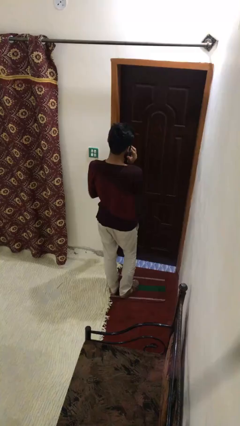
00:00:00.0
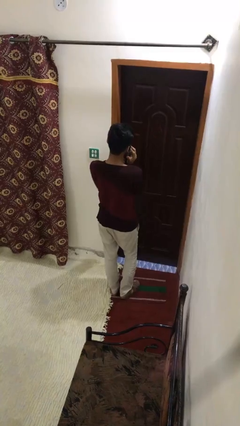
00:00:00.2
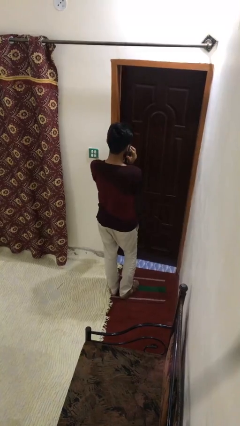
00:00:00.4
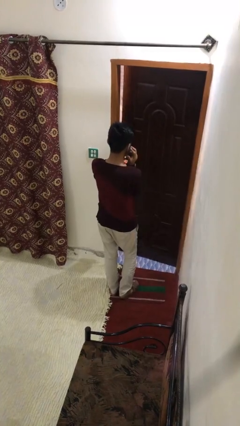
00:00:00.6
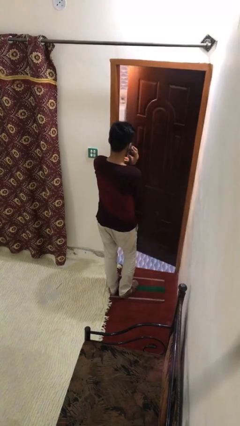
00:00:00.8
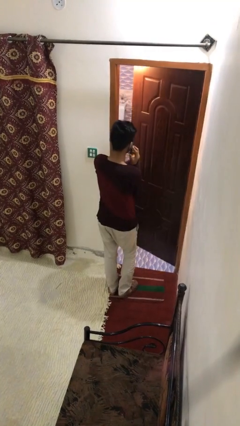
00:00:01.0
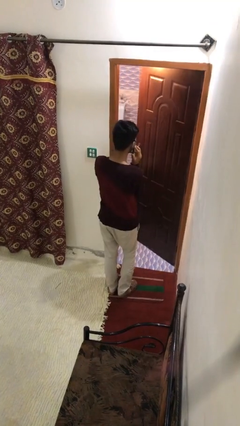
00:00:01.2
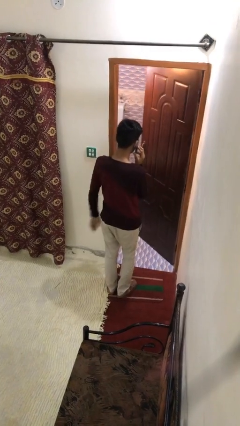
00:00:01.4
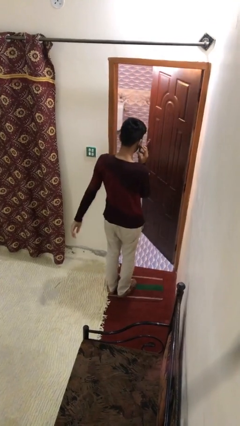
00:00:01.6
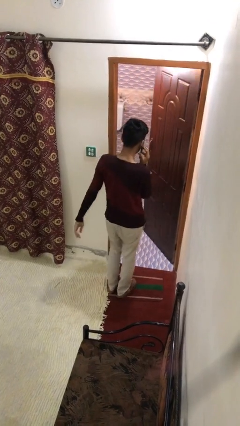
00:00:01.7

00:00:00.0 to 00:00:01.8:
person opens facility door

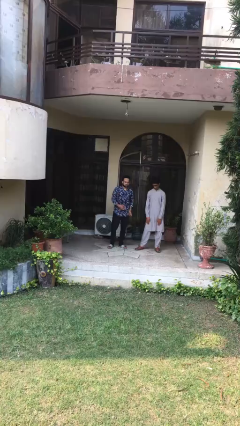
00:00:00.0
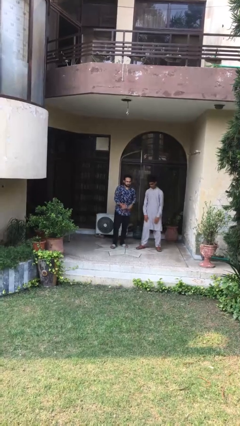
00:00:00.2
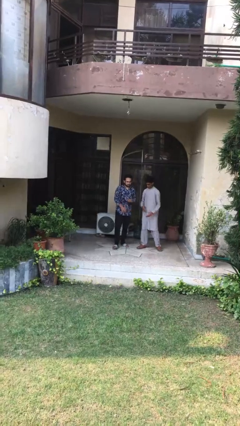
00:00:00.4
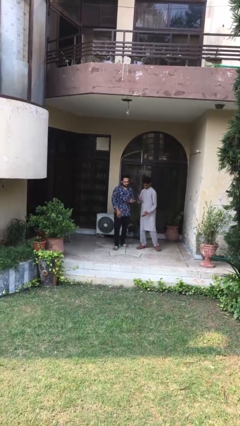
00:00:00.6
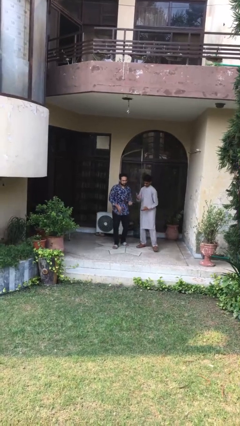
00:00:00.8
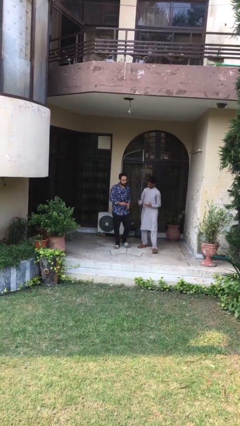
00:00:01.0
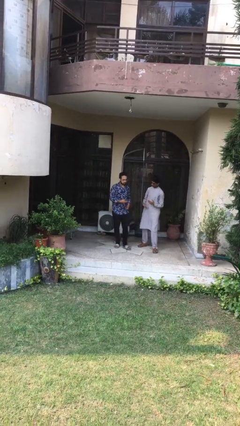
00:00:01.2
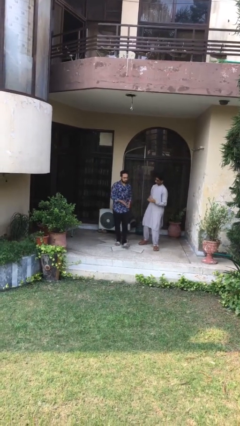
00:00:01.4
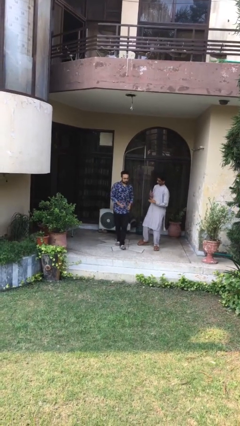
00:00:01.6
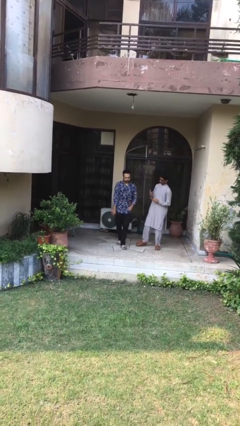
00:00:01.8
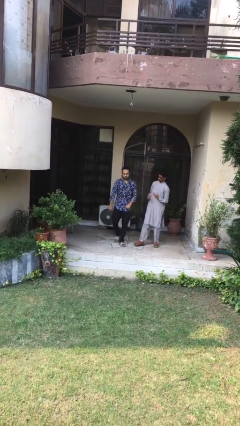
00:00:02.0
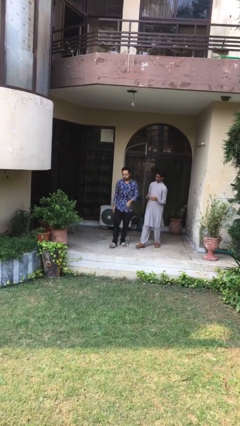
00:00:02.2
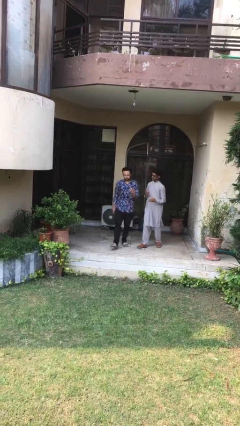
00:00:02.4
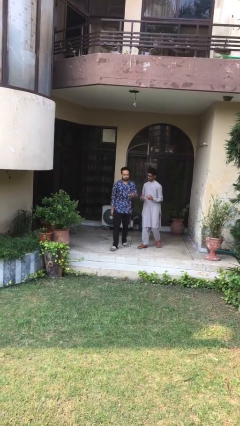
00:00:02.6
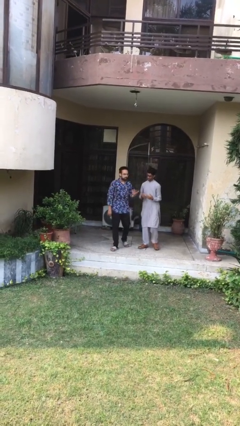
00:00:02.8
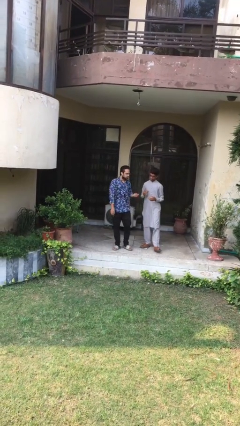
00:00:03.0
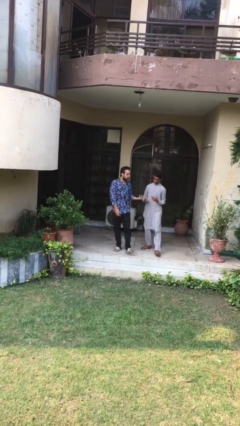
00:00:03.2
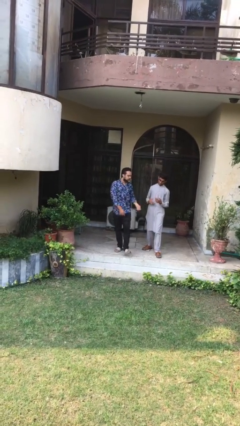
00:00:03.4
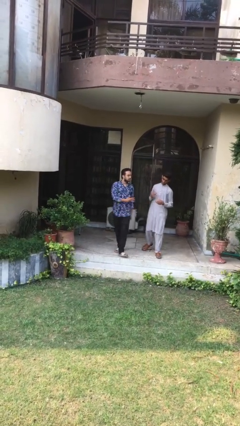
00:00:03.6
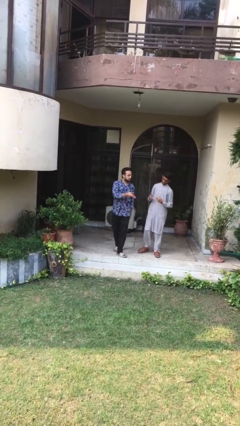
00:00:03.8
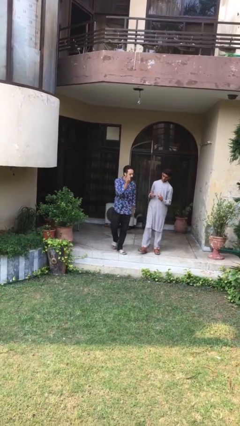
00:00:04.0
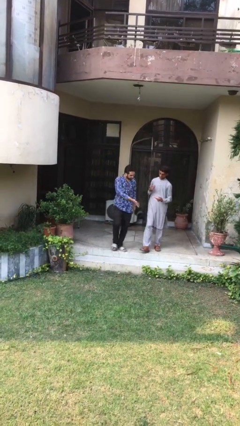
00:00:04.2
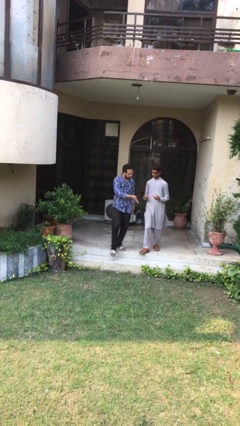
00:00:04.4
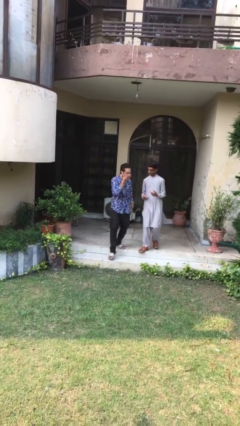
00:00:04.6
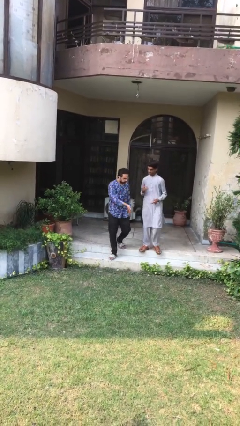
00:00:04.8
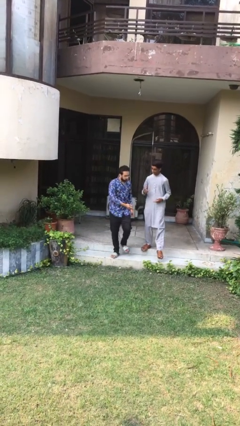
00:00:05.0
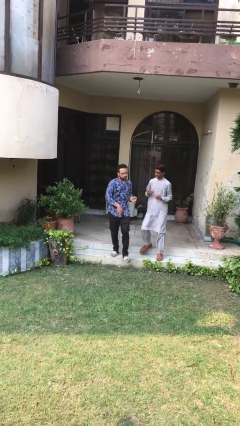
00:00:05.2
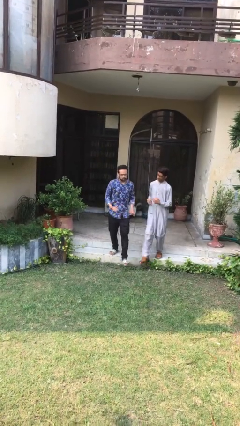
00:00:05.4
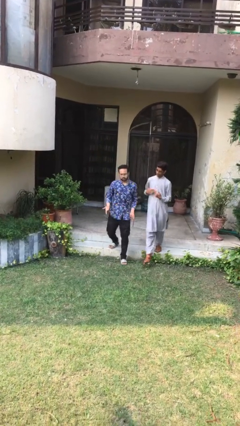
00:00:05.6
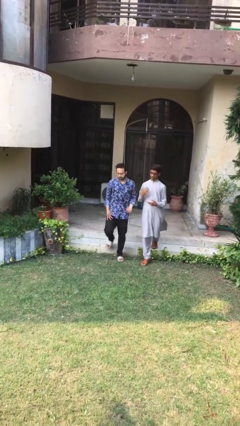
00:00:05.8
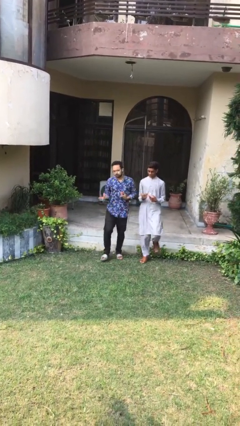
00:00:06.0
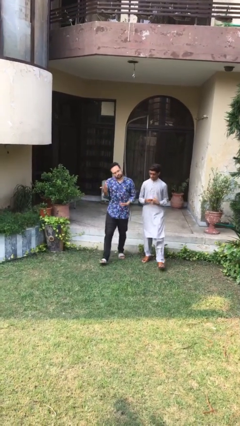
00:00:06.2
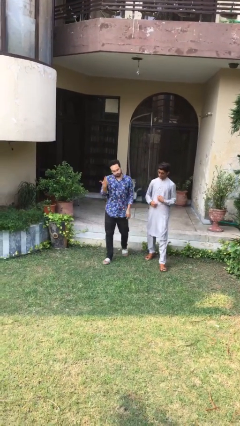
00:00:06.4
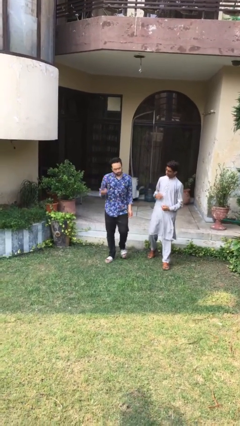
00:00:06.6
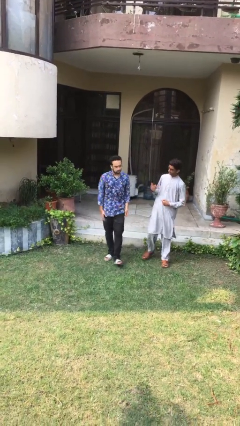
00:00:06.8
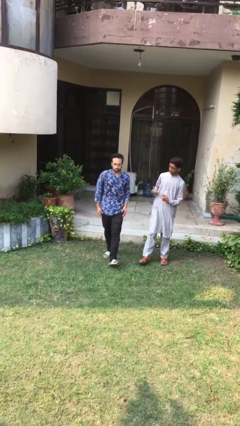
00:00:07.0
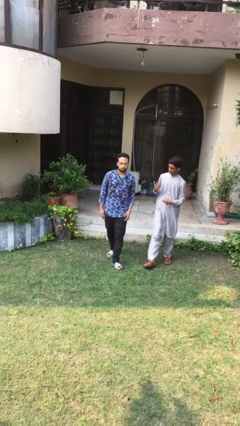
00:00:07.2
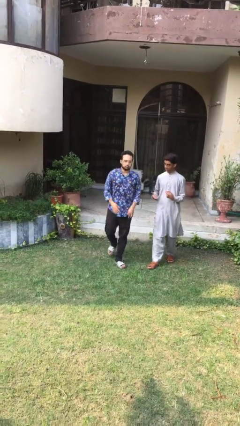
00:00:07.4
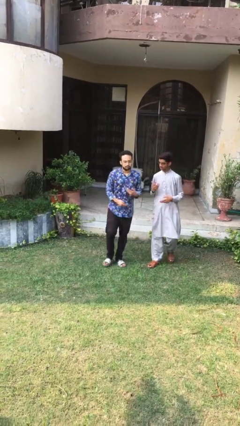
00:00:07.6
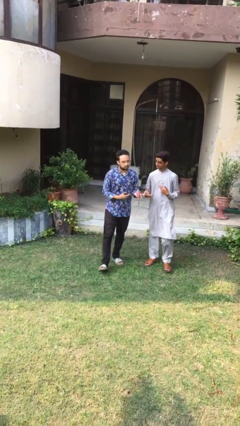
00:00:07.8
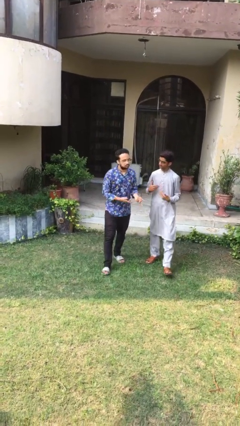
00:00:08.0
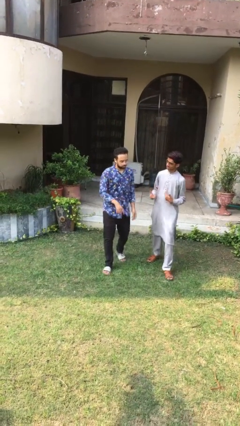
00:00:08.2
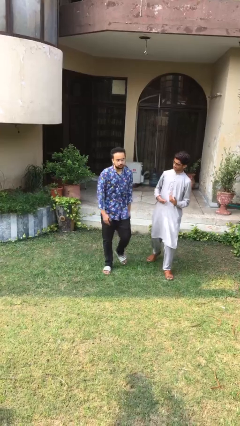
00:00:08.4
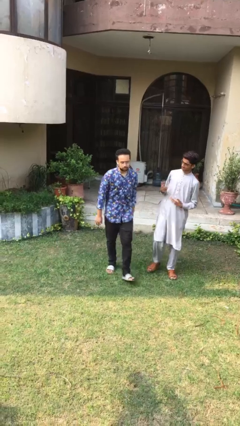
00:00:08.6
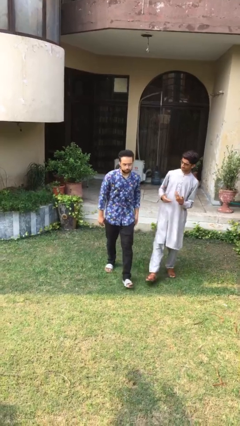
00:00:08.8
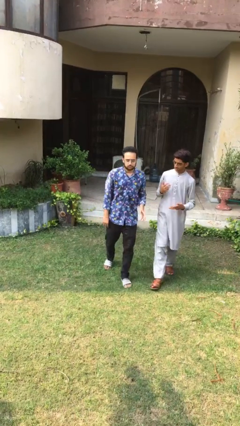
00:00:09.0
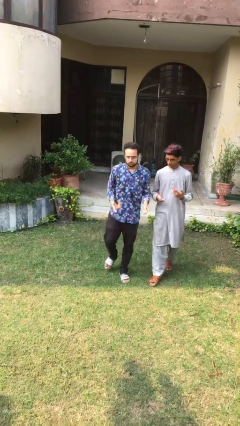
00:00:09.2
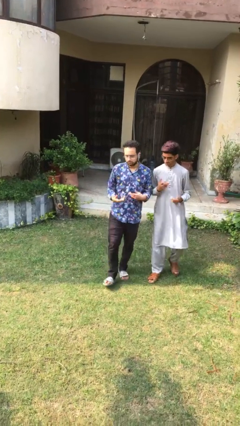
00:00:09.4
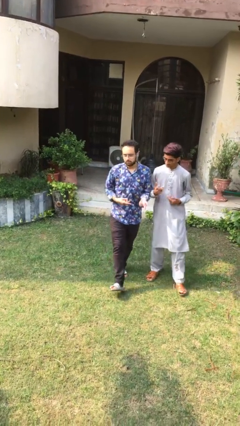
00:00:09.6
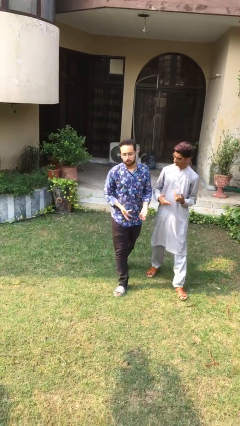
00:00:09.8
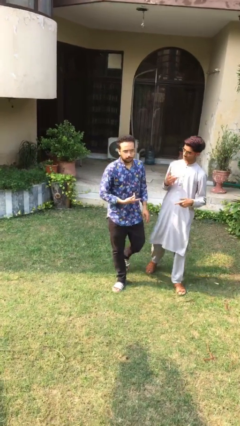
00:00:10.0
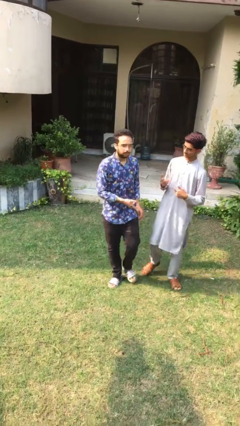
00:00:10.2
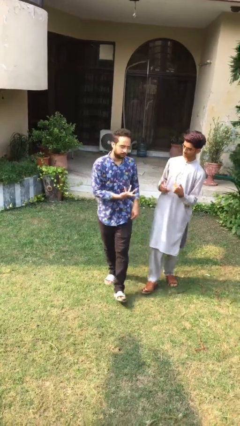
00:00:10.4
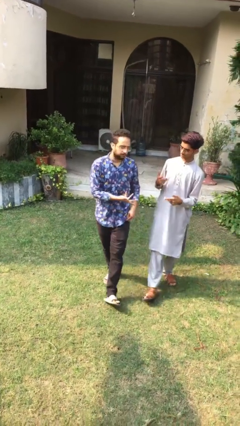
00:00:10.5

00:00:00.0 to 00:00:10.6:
person talks to person

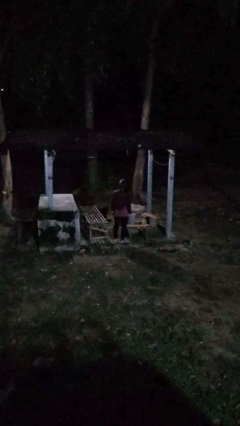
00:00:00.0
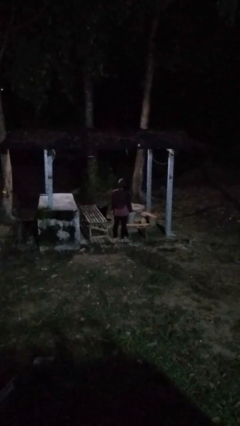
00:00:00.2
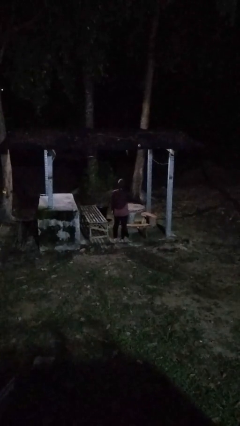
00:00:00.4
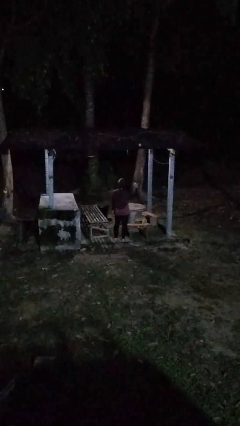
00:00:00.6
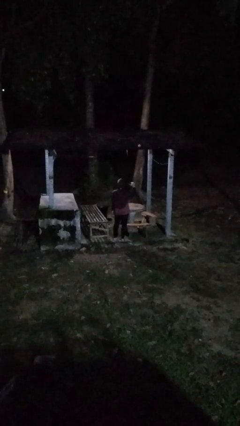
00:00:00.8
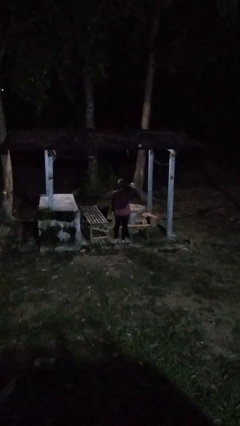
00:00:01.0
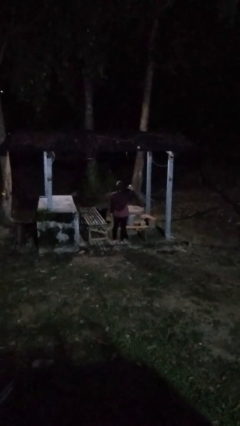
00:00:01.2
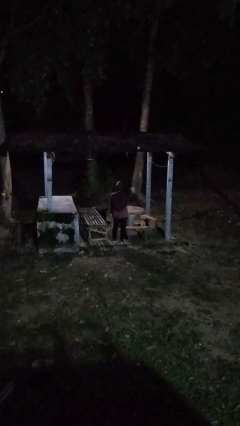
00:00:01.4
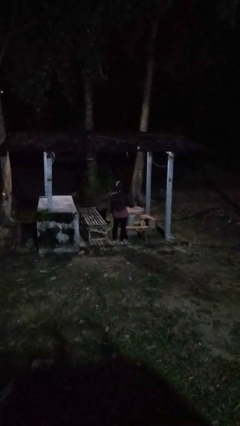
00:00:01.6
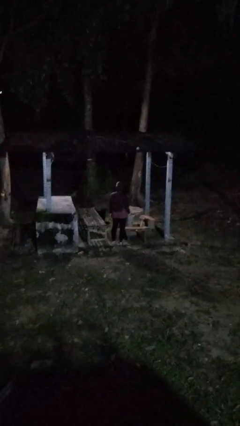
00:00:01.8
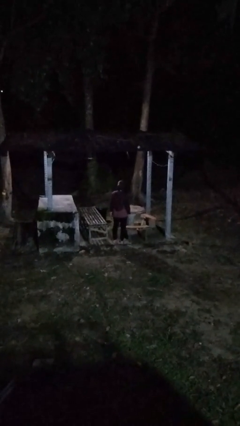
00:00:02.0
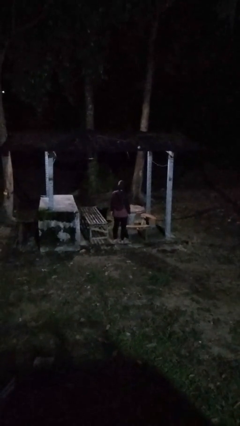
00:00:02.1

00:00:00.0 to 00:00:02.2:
person gestures behind me

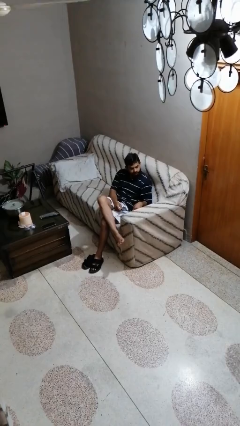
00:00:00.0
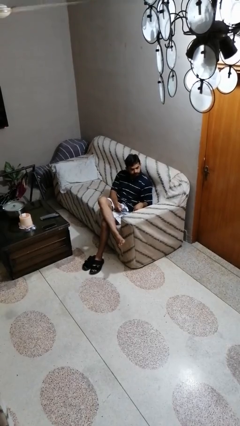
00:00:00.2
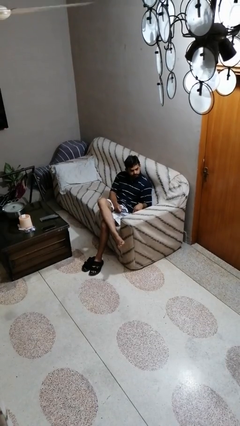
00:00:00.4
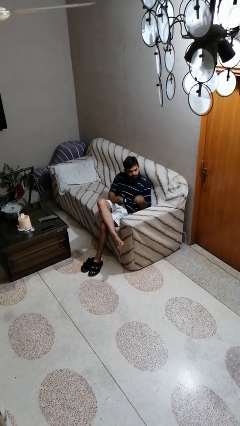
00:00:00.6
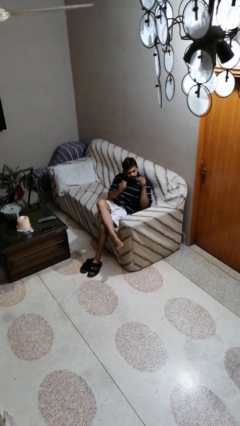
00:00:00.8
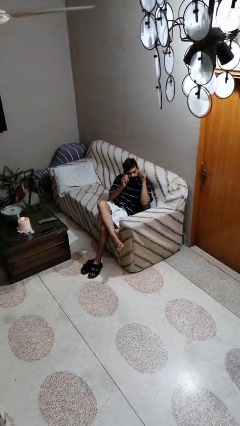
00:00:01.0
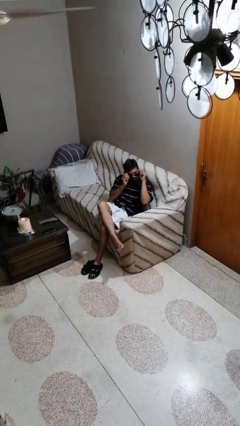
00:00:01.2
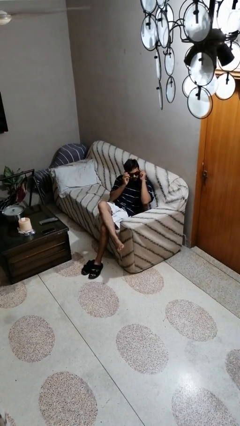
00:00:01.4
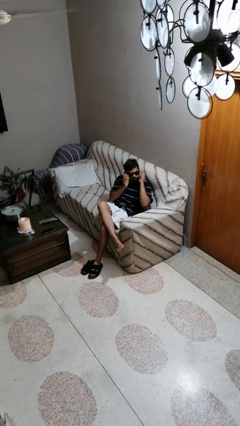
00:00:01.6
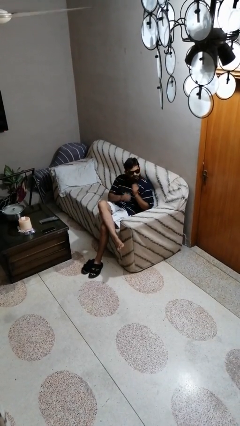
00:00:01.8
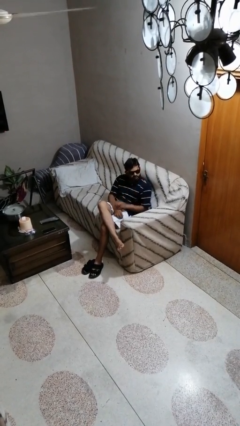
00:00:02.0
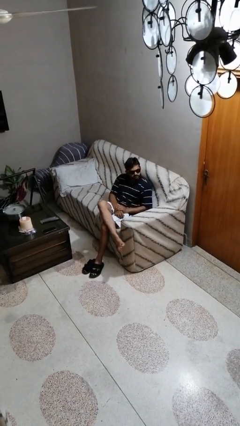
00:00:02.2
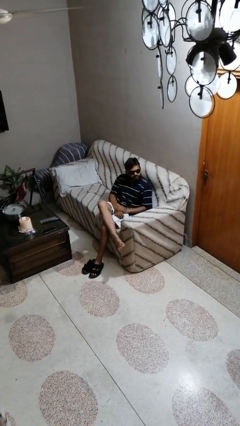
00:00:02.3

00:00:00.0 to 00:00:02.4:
person puts on sunglasses

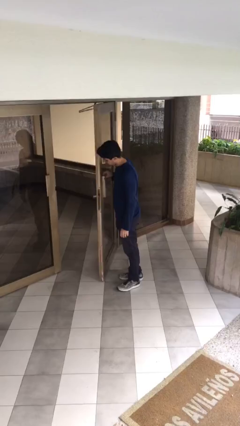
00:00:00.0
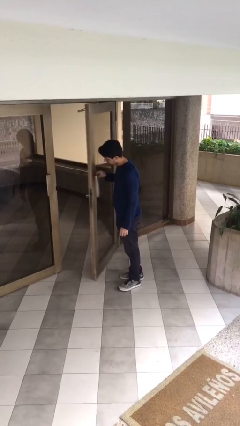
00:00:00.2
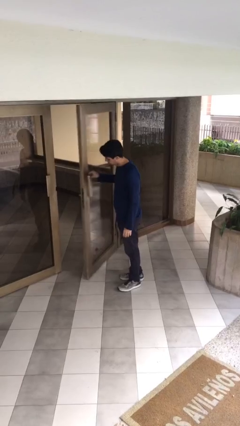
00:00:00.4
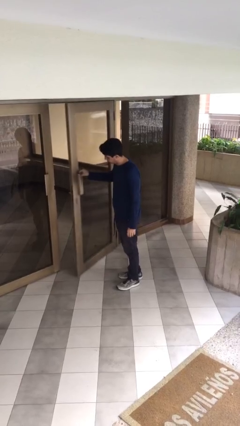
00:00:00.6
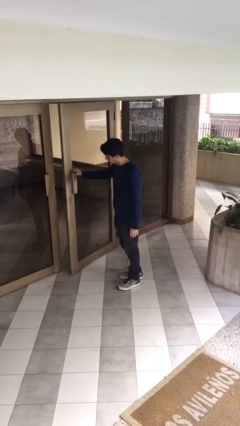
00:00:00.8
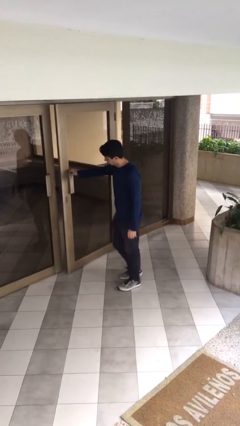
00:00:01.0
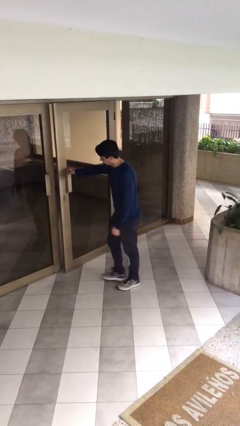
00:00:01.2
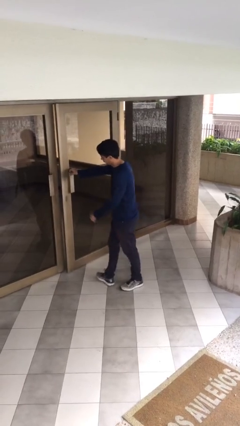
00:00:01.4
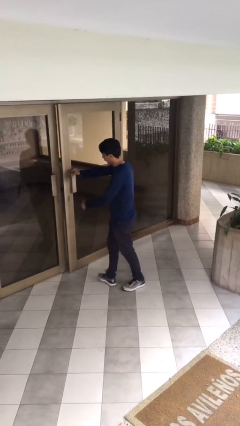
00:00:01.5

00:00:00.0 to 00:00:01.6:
person closes facility door
